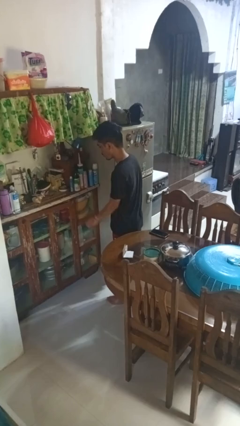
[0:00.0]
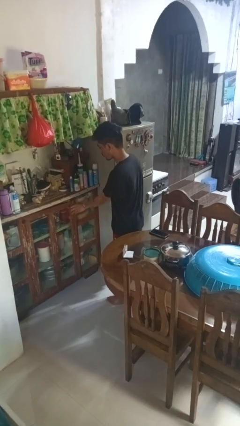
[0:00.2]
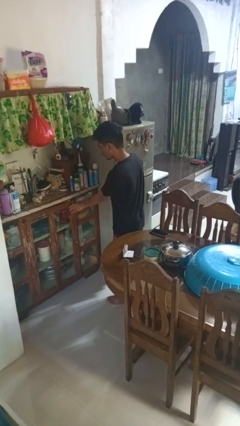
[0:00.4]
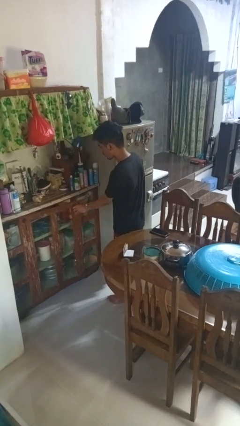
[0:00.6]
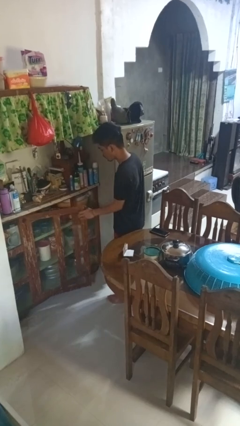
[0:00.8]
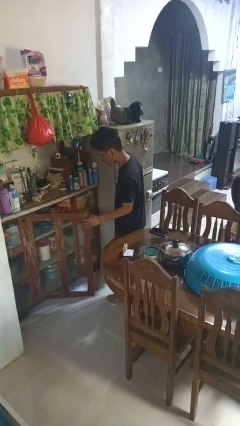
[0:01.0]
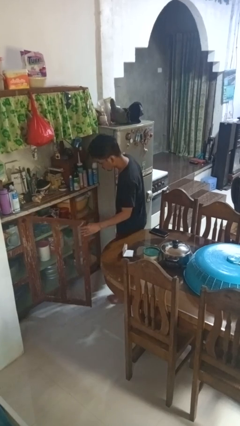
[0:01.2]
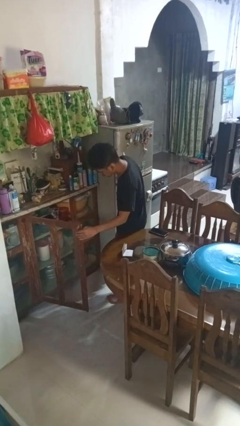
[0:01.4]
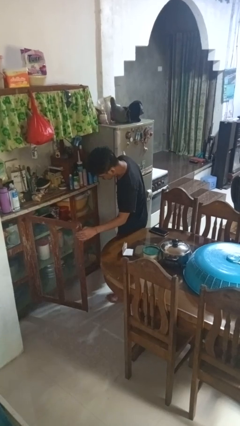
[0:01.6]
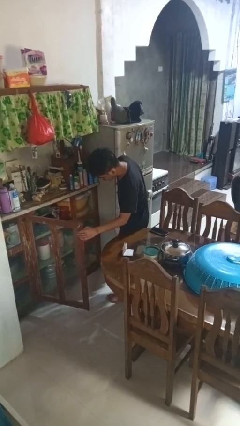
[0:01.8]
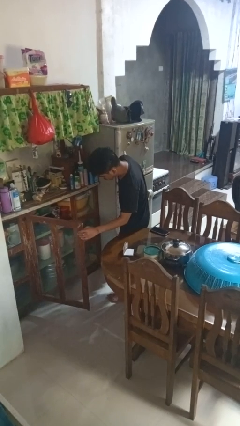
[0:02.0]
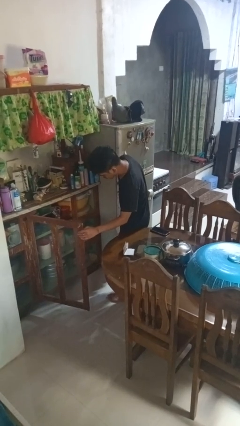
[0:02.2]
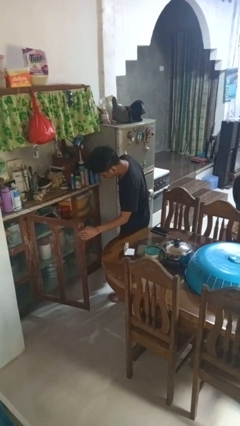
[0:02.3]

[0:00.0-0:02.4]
person opens cabinet

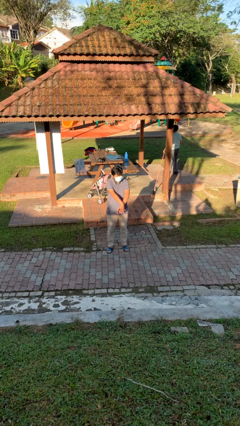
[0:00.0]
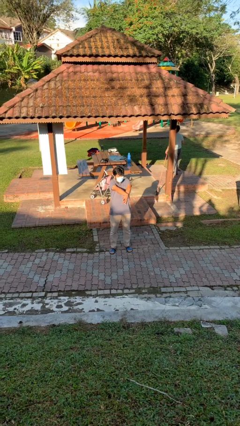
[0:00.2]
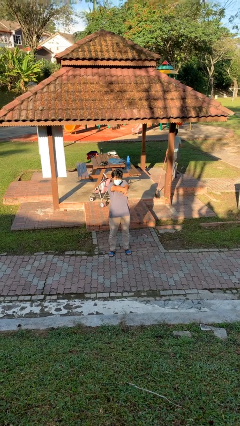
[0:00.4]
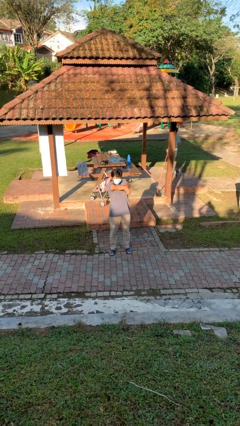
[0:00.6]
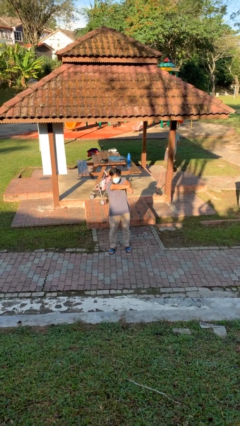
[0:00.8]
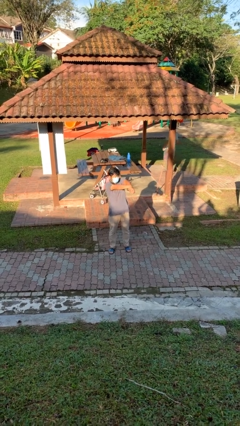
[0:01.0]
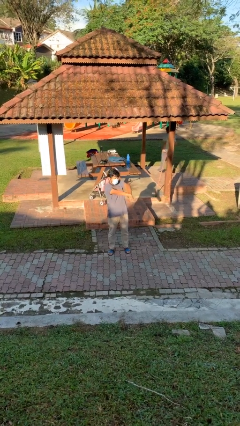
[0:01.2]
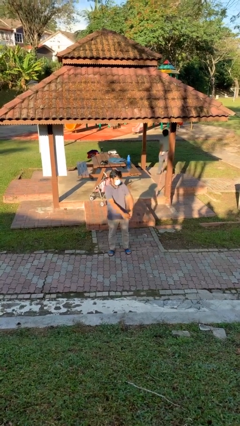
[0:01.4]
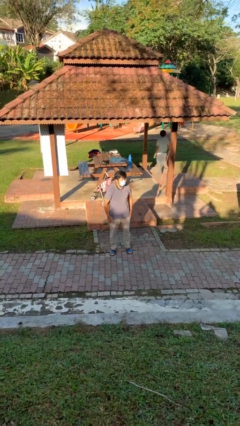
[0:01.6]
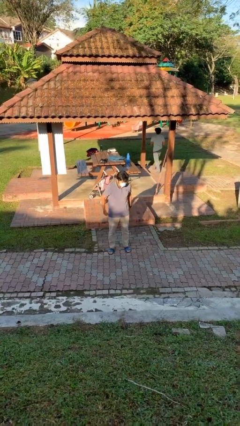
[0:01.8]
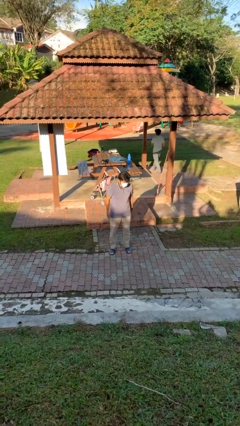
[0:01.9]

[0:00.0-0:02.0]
person crosses arms

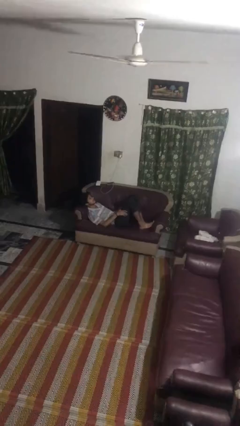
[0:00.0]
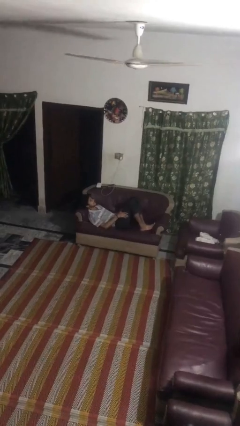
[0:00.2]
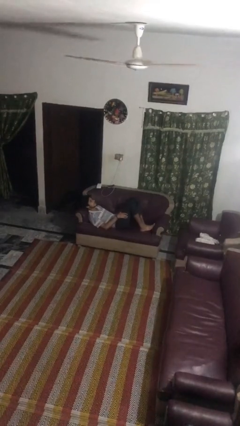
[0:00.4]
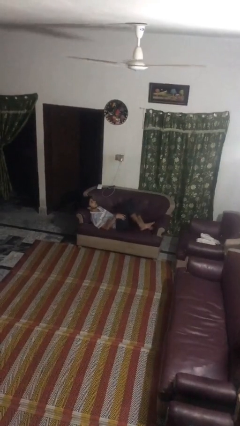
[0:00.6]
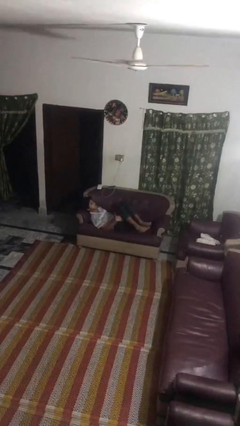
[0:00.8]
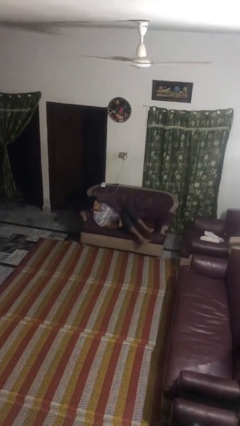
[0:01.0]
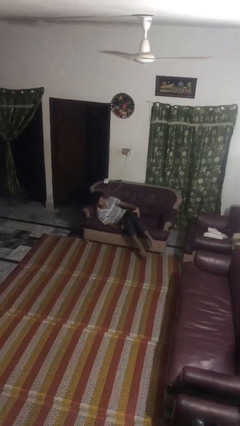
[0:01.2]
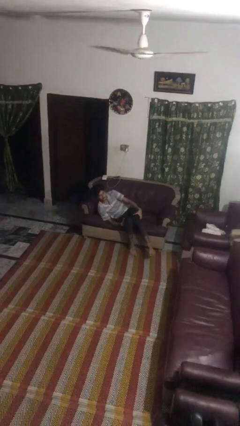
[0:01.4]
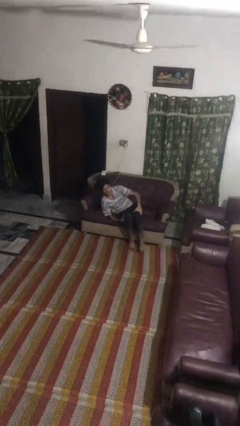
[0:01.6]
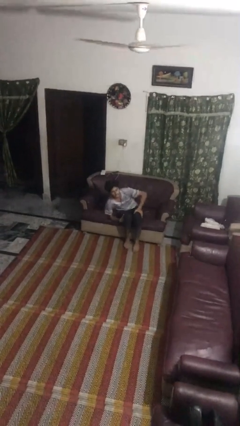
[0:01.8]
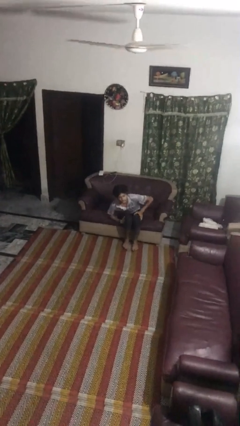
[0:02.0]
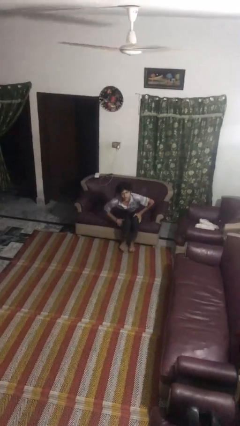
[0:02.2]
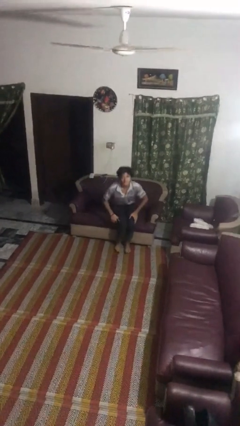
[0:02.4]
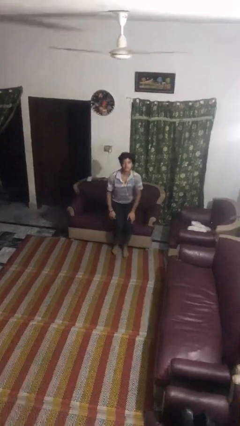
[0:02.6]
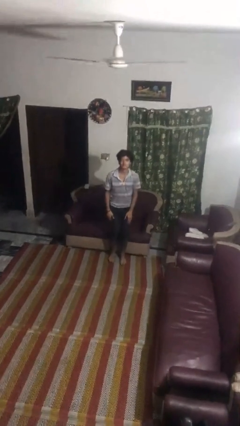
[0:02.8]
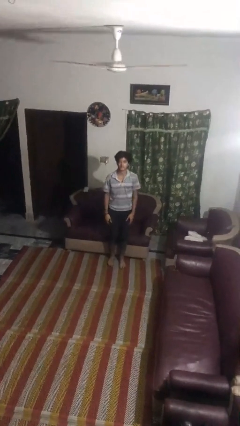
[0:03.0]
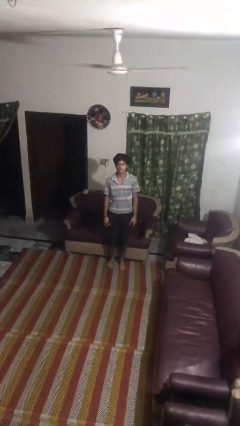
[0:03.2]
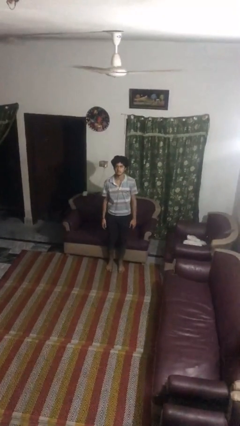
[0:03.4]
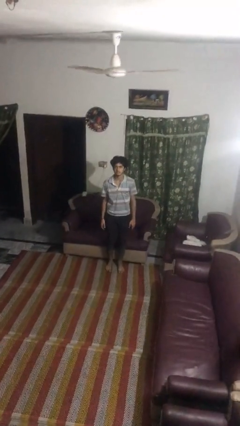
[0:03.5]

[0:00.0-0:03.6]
person stands up

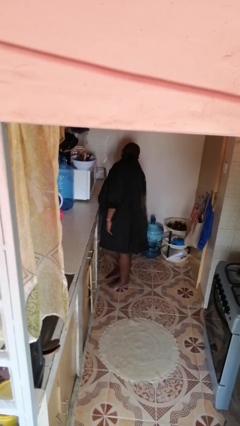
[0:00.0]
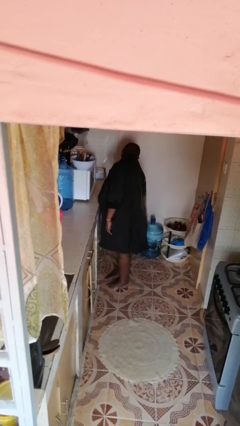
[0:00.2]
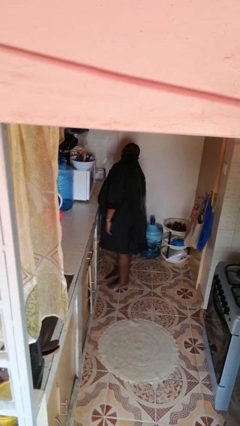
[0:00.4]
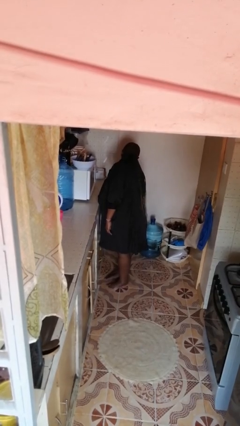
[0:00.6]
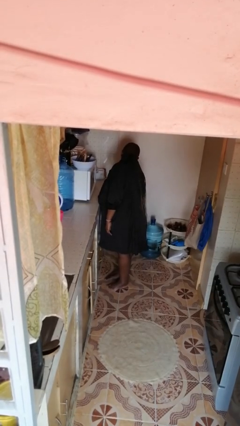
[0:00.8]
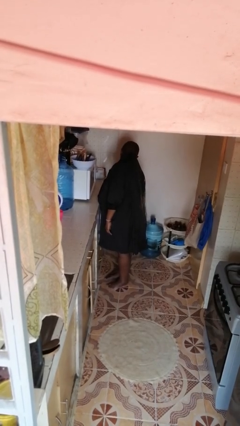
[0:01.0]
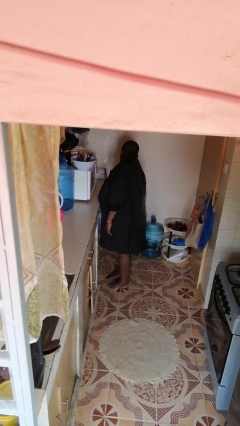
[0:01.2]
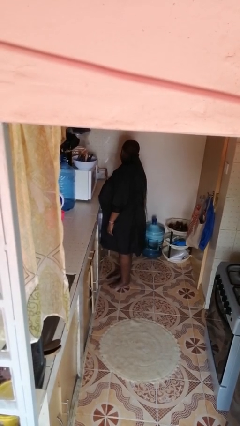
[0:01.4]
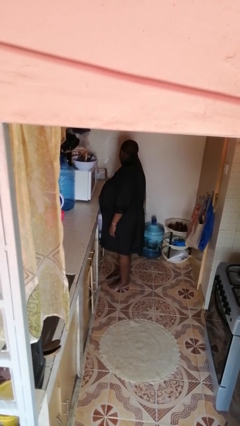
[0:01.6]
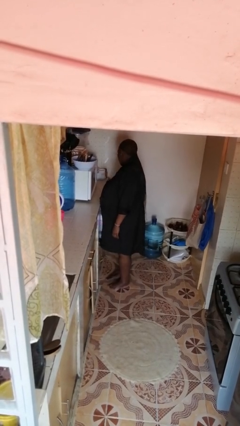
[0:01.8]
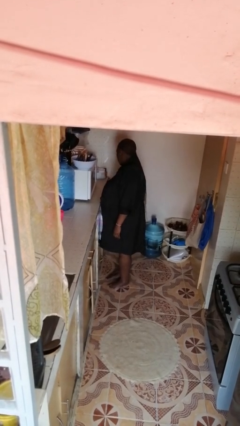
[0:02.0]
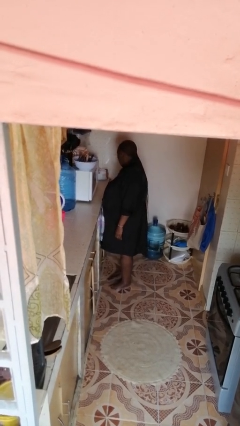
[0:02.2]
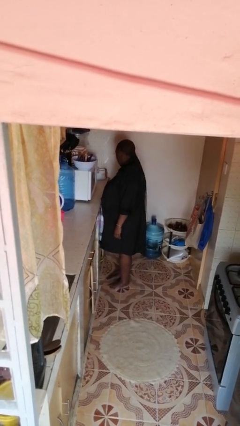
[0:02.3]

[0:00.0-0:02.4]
person closes cabinet

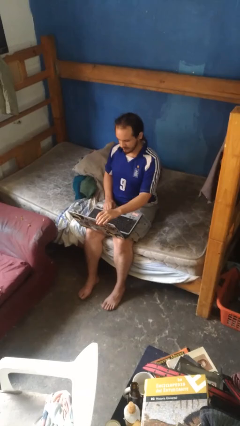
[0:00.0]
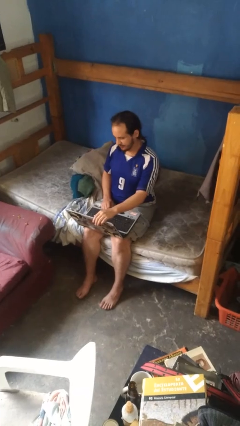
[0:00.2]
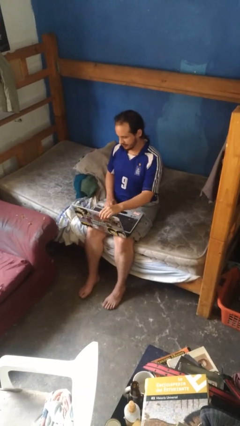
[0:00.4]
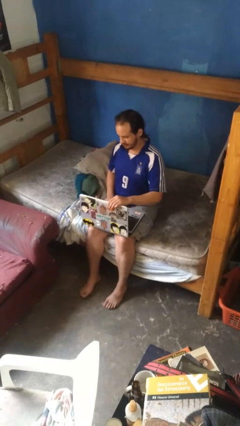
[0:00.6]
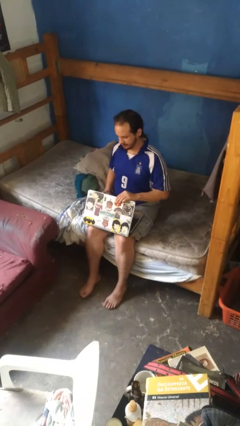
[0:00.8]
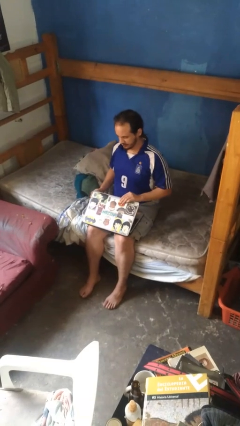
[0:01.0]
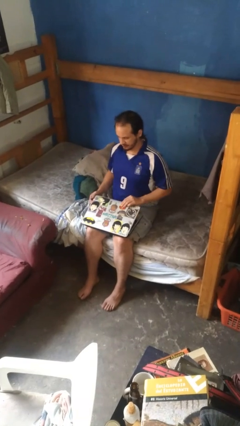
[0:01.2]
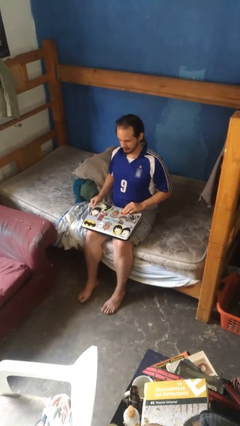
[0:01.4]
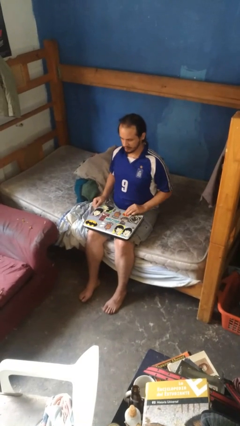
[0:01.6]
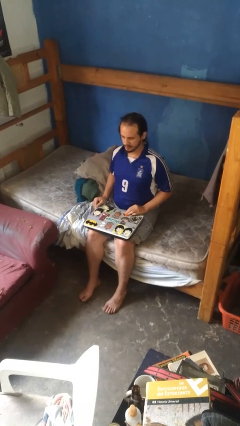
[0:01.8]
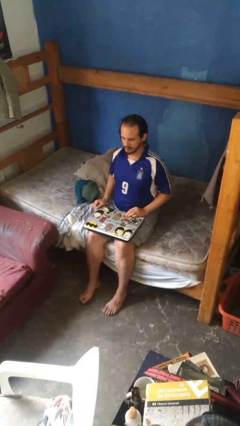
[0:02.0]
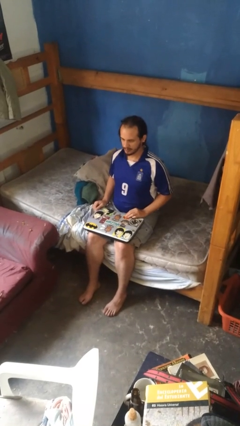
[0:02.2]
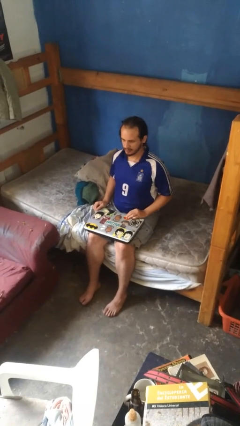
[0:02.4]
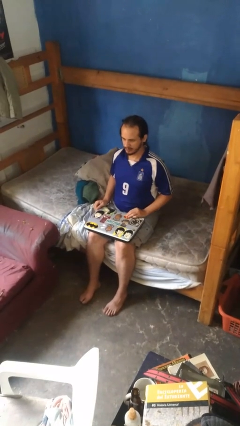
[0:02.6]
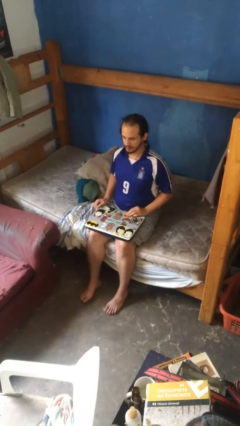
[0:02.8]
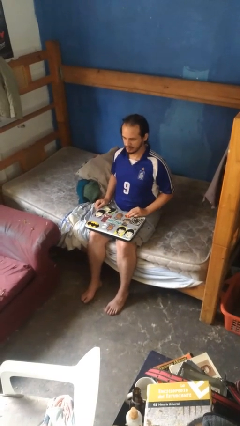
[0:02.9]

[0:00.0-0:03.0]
person closes laptop

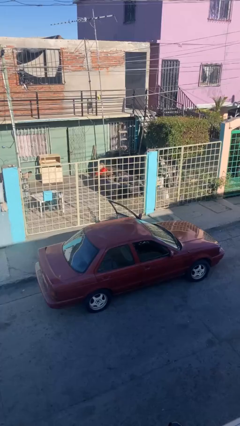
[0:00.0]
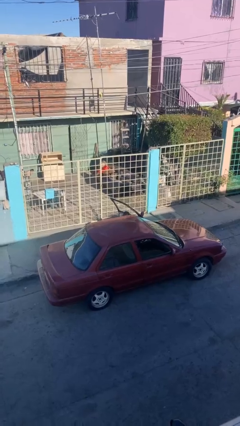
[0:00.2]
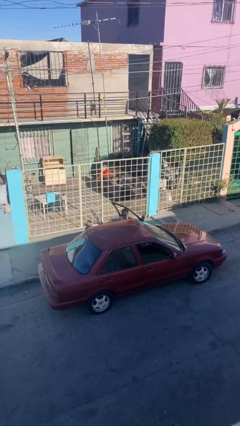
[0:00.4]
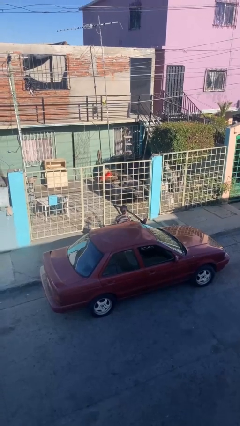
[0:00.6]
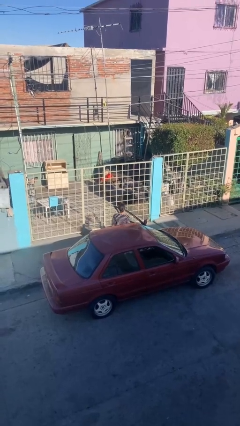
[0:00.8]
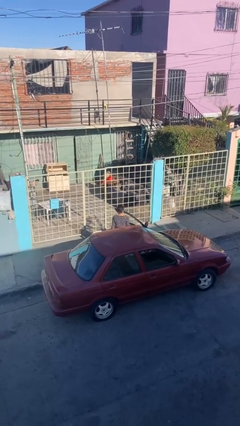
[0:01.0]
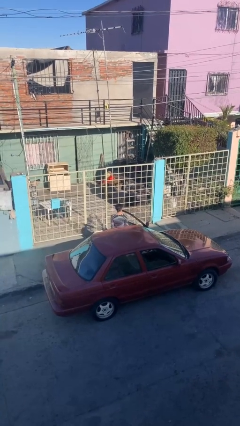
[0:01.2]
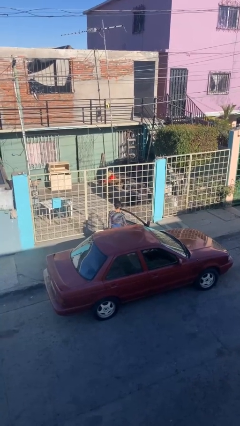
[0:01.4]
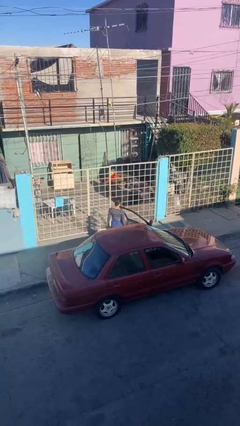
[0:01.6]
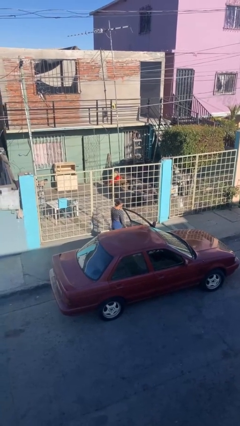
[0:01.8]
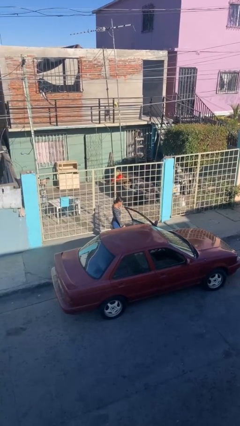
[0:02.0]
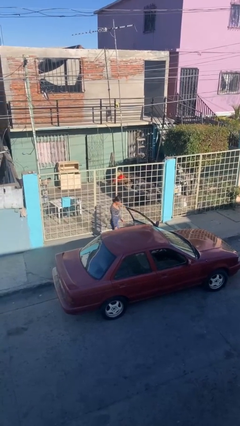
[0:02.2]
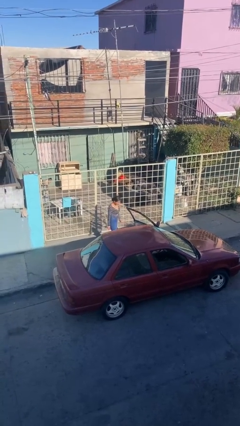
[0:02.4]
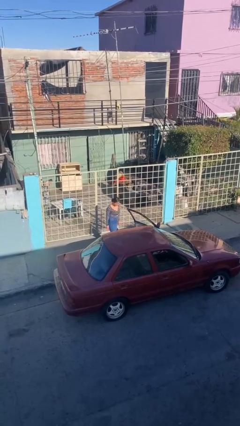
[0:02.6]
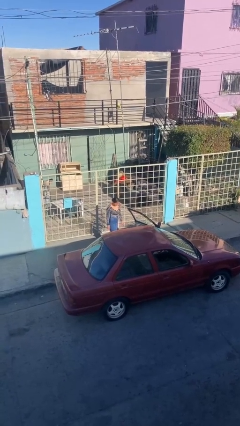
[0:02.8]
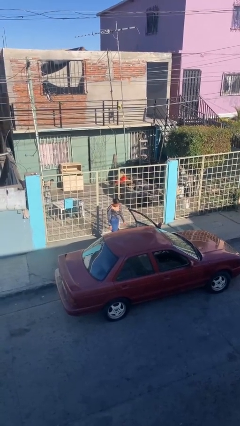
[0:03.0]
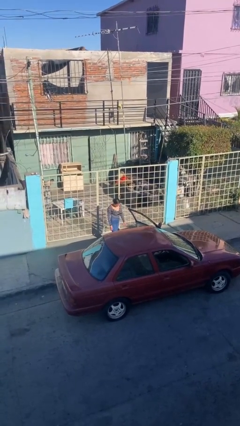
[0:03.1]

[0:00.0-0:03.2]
person exits car

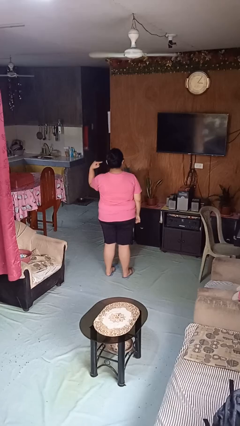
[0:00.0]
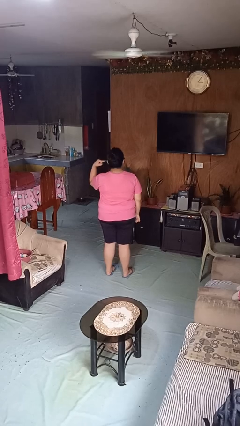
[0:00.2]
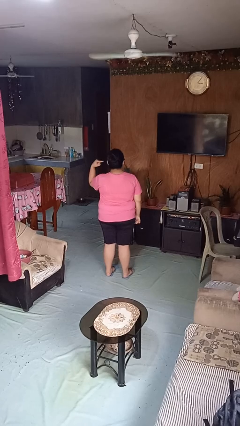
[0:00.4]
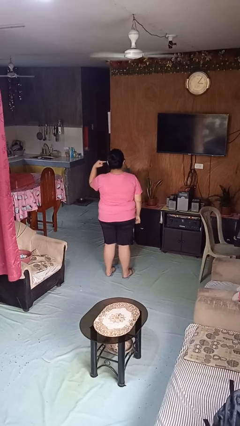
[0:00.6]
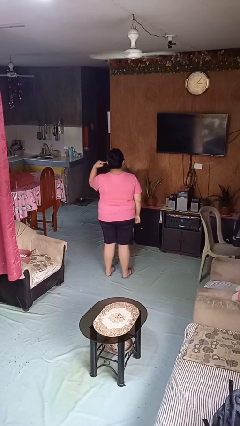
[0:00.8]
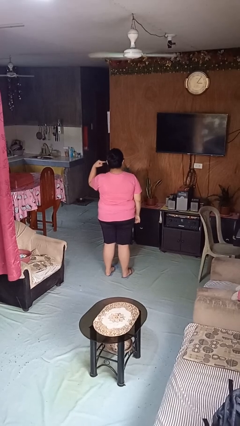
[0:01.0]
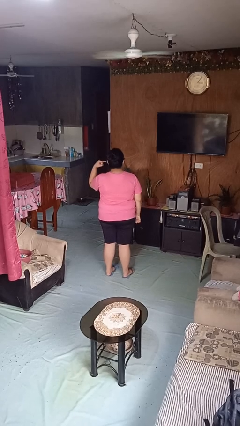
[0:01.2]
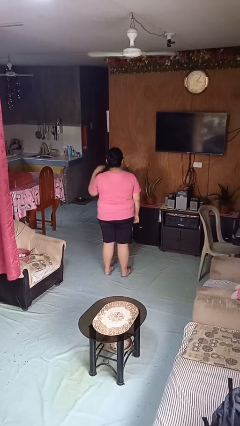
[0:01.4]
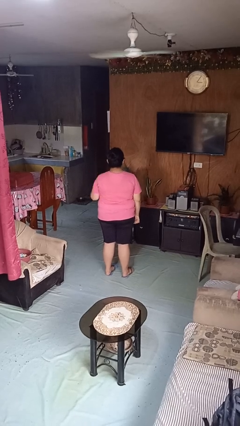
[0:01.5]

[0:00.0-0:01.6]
person gestures listen closely
